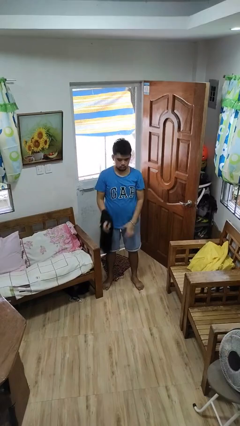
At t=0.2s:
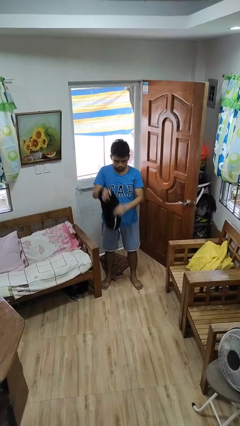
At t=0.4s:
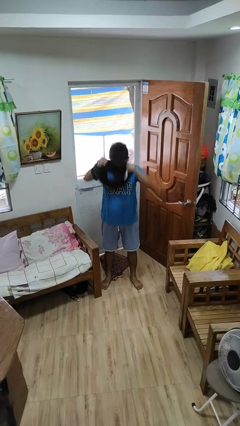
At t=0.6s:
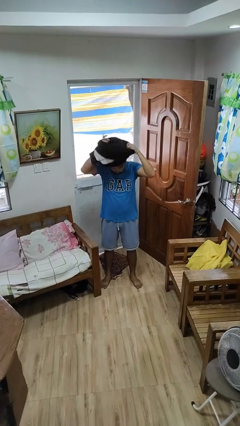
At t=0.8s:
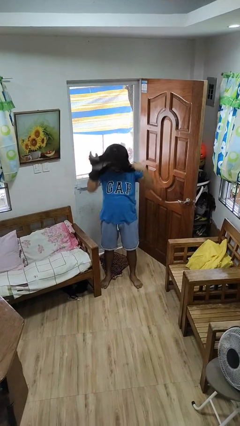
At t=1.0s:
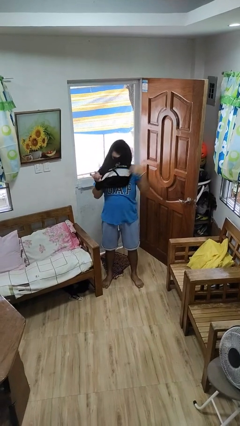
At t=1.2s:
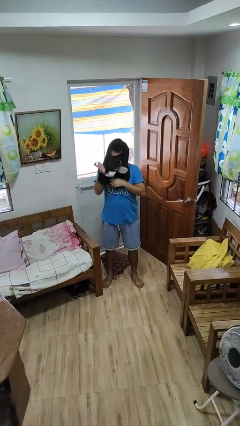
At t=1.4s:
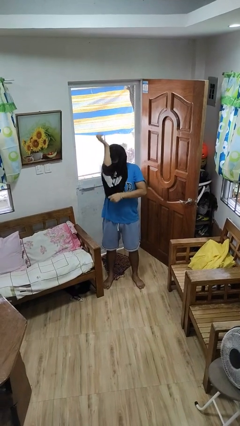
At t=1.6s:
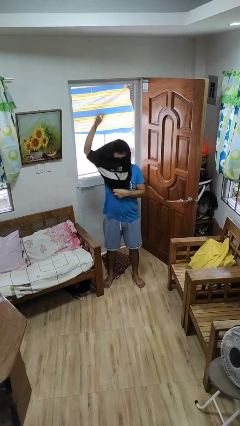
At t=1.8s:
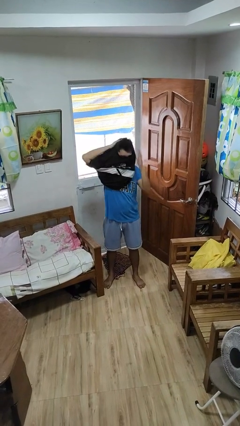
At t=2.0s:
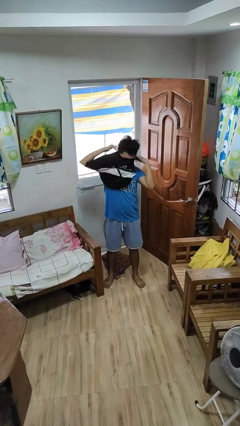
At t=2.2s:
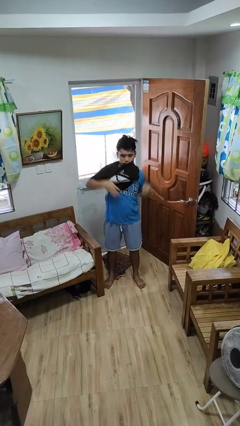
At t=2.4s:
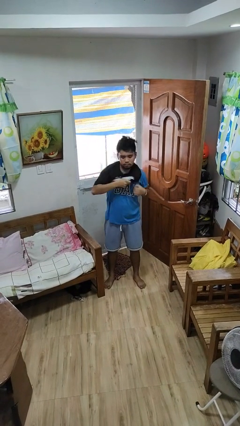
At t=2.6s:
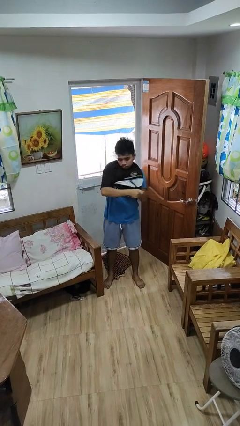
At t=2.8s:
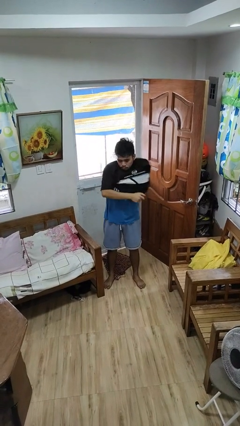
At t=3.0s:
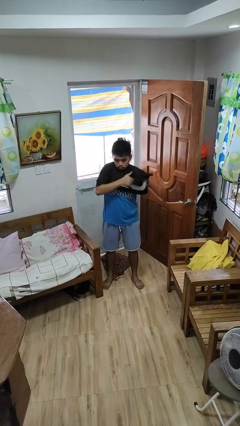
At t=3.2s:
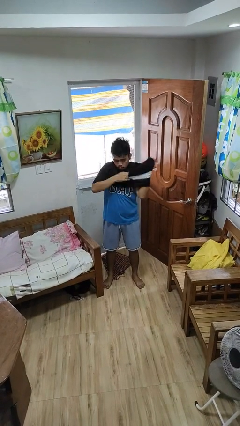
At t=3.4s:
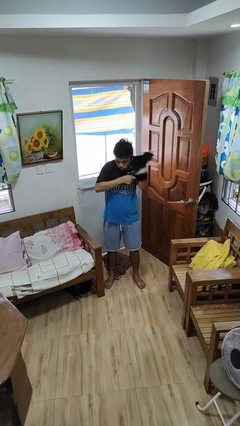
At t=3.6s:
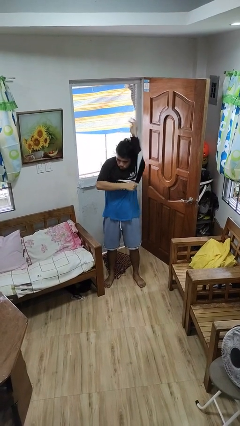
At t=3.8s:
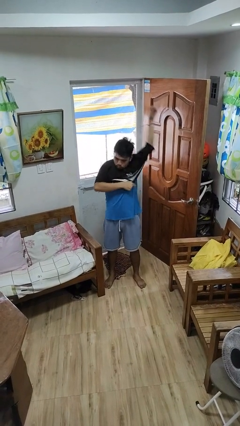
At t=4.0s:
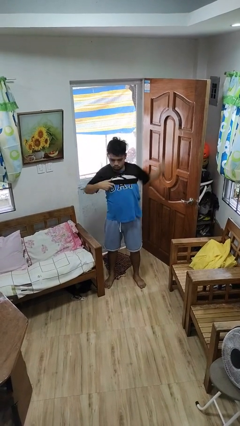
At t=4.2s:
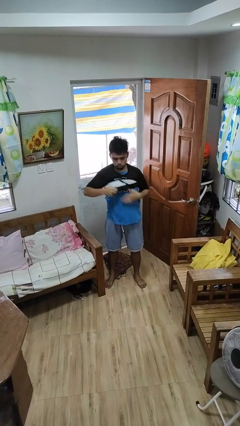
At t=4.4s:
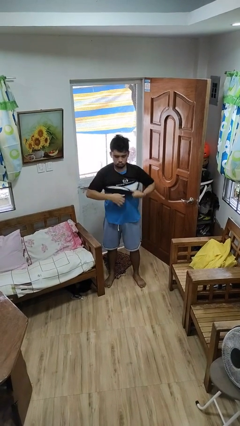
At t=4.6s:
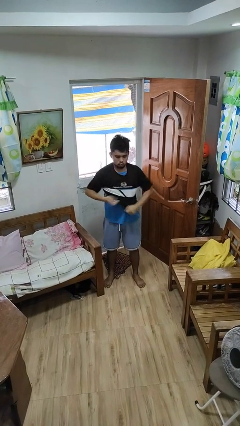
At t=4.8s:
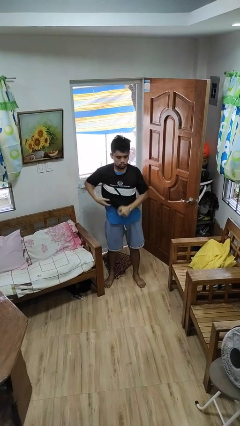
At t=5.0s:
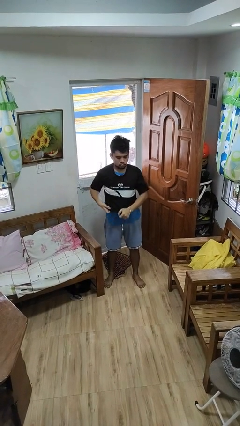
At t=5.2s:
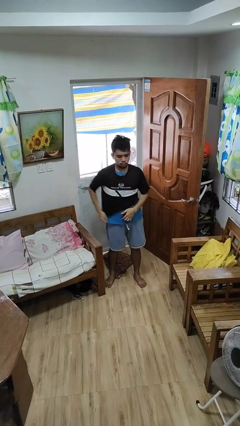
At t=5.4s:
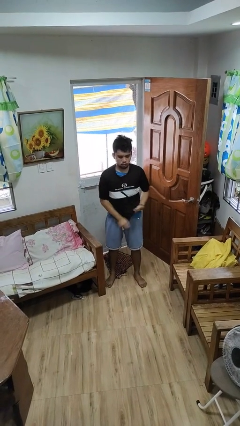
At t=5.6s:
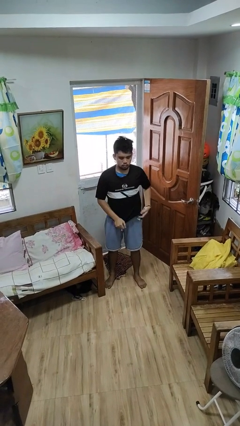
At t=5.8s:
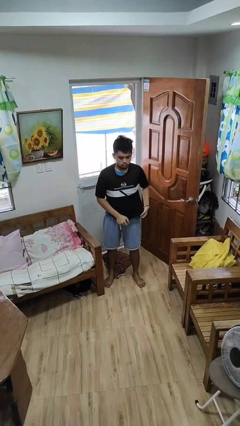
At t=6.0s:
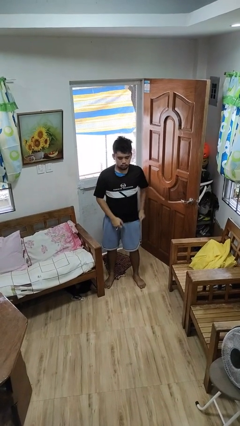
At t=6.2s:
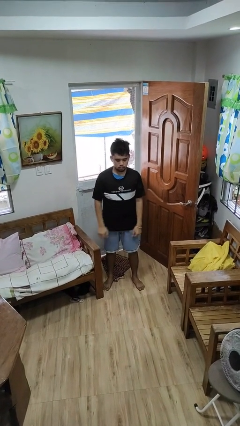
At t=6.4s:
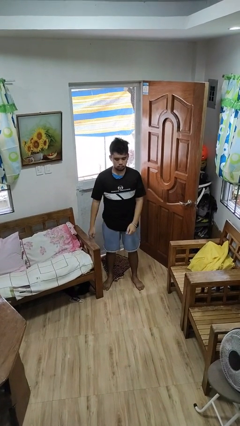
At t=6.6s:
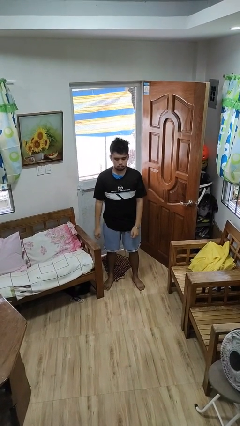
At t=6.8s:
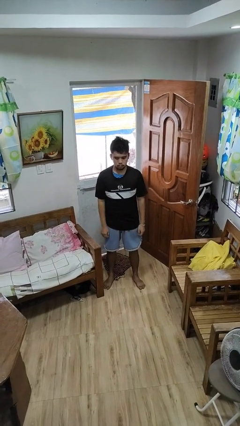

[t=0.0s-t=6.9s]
person puts on shirt

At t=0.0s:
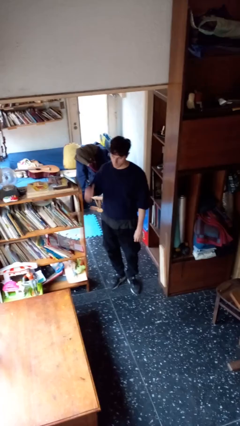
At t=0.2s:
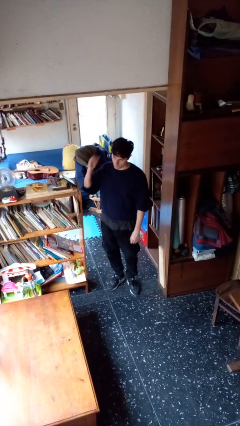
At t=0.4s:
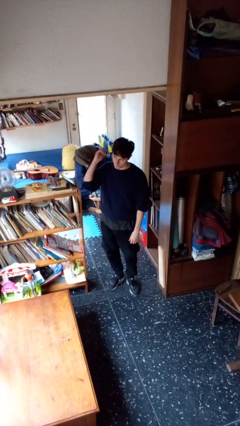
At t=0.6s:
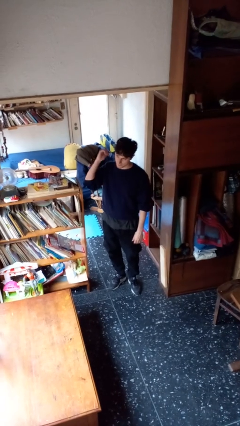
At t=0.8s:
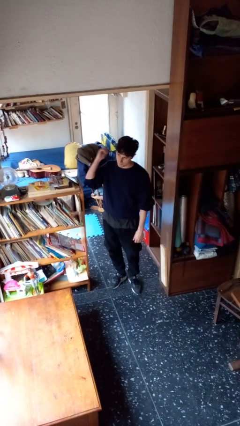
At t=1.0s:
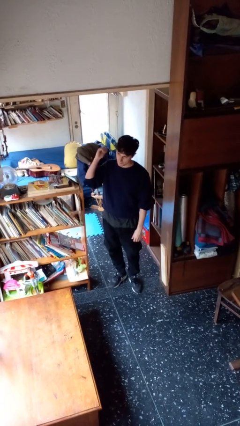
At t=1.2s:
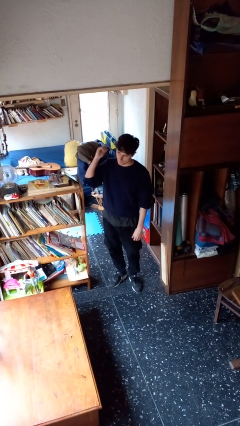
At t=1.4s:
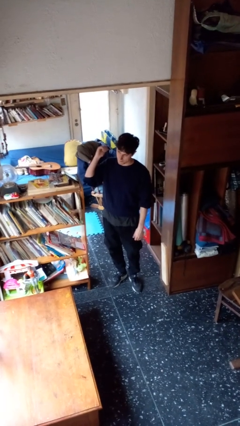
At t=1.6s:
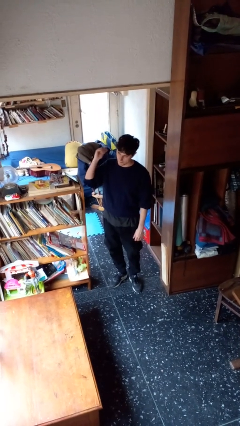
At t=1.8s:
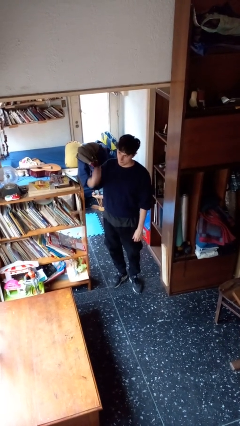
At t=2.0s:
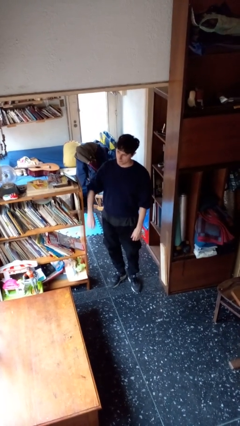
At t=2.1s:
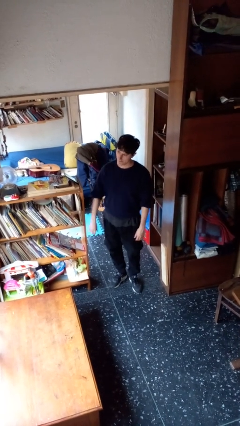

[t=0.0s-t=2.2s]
person gestures behind me

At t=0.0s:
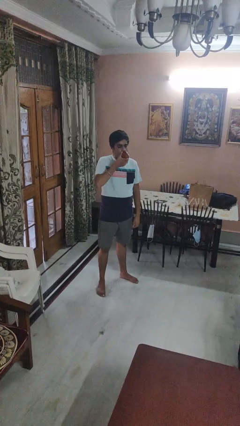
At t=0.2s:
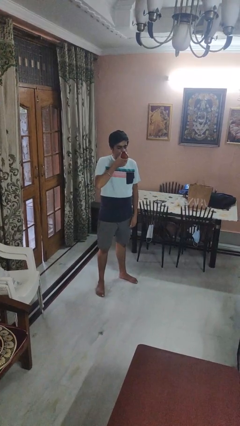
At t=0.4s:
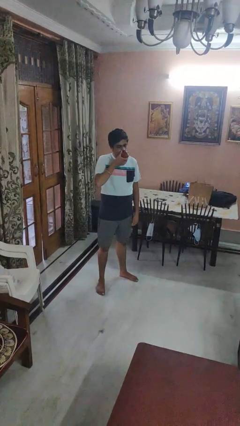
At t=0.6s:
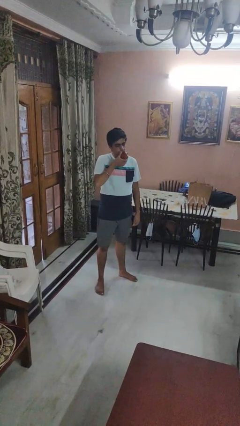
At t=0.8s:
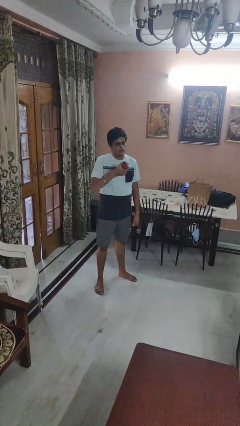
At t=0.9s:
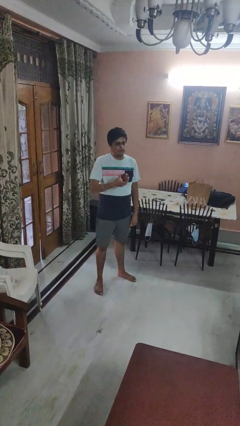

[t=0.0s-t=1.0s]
person eats apple

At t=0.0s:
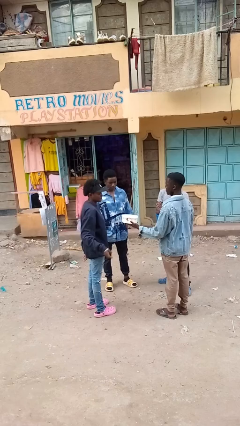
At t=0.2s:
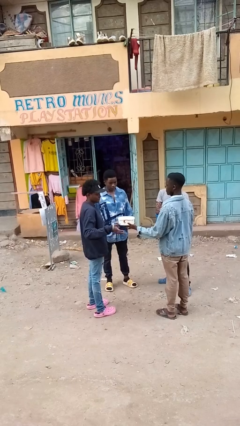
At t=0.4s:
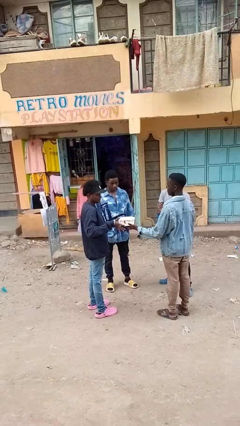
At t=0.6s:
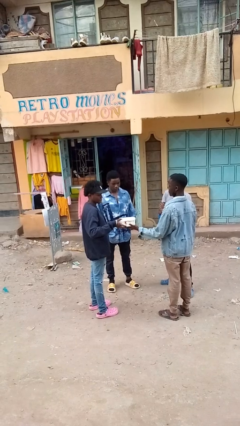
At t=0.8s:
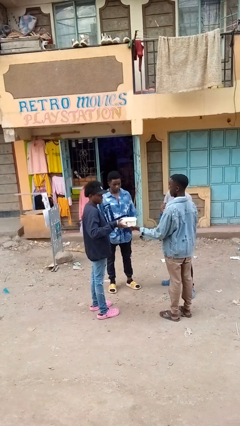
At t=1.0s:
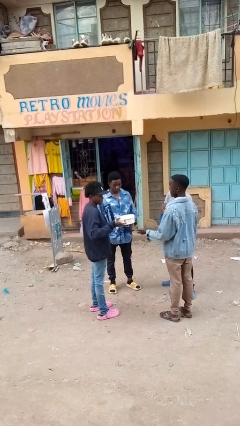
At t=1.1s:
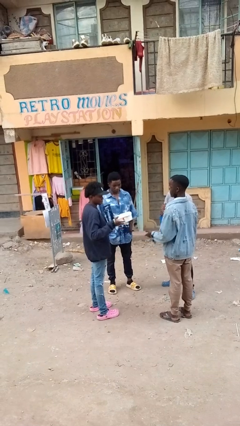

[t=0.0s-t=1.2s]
person transfers object to person

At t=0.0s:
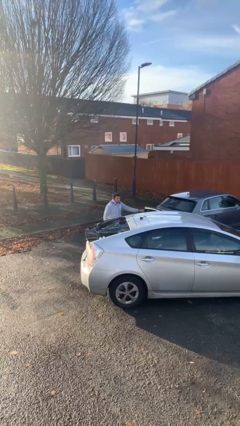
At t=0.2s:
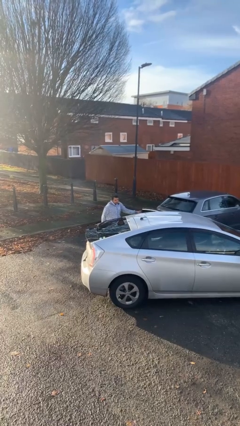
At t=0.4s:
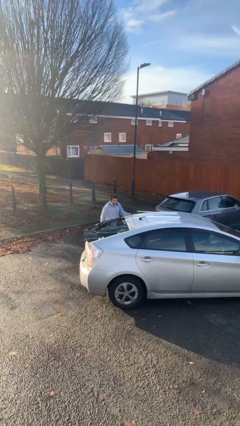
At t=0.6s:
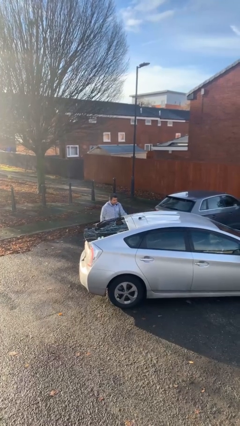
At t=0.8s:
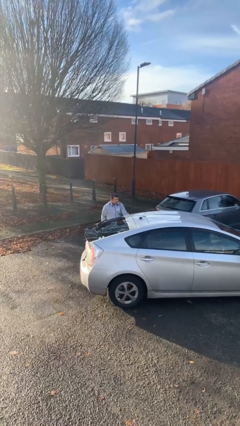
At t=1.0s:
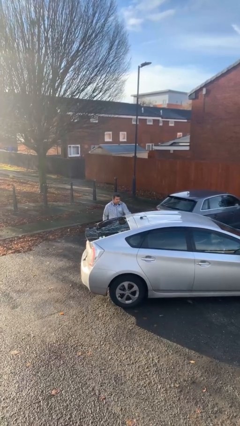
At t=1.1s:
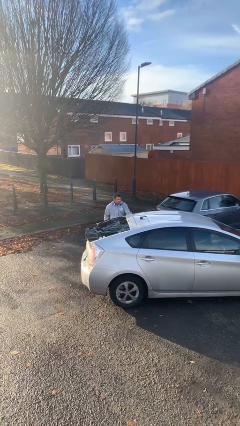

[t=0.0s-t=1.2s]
person closes car door

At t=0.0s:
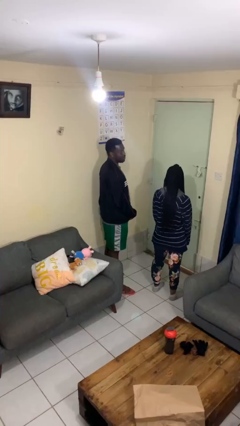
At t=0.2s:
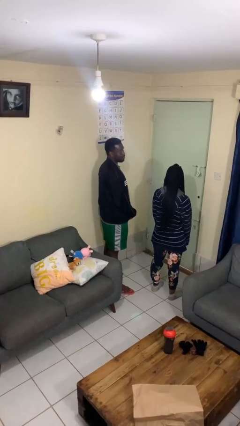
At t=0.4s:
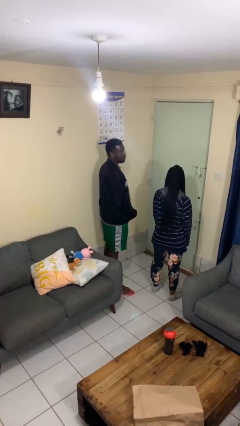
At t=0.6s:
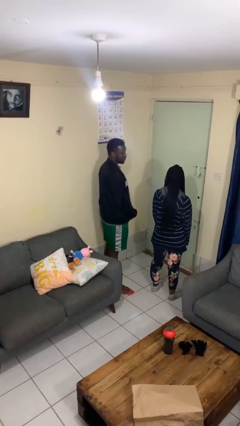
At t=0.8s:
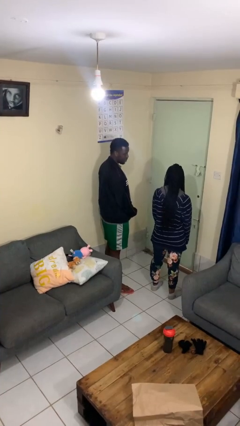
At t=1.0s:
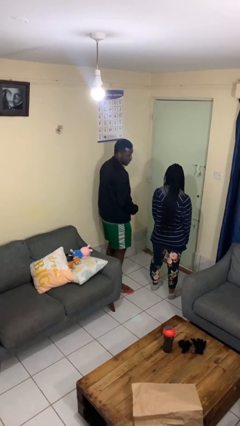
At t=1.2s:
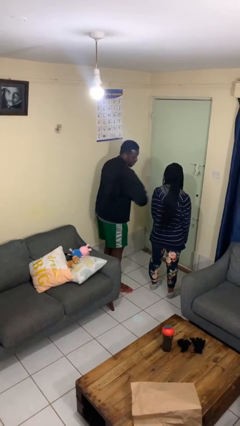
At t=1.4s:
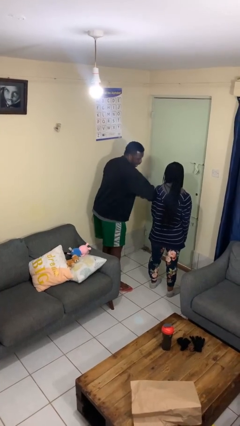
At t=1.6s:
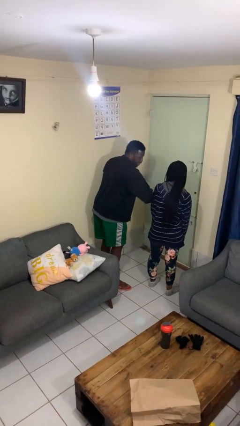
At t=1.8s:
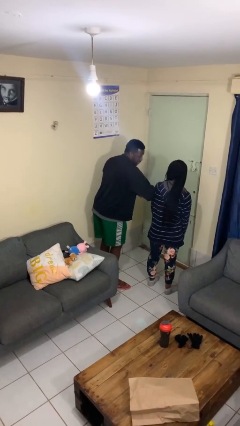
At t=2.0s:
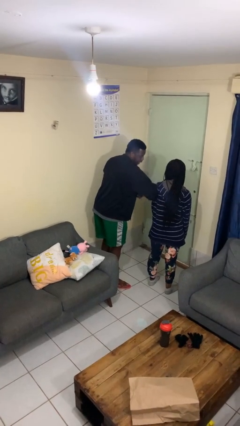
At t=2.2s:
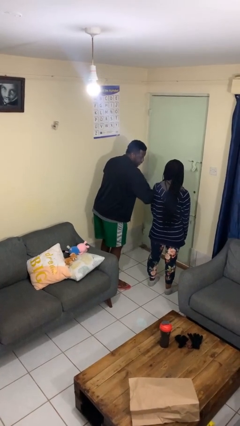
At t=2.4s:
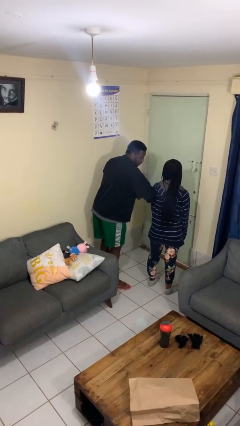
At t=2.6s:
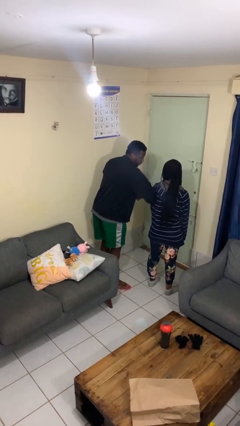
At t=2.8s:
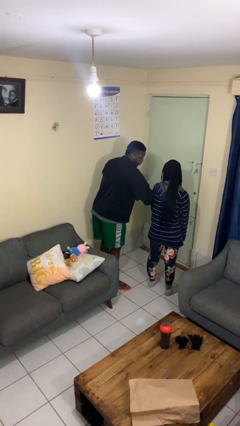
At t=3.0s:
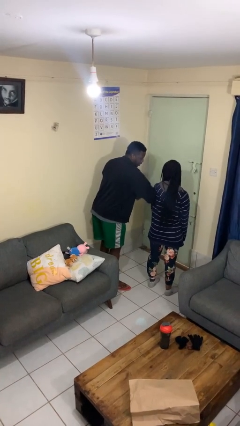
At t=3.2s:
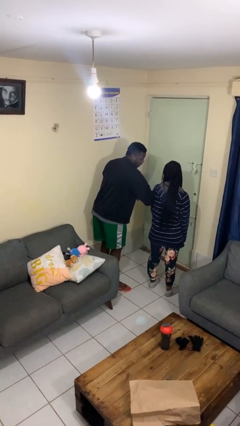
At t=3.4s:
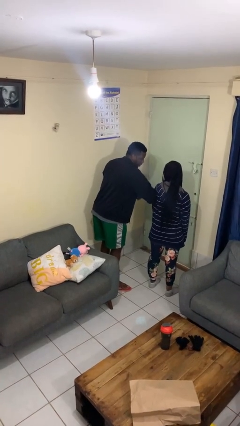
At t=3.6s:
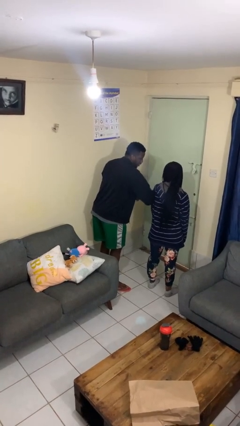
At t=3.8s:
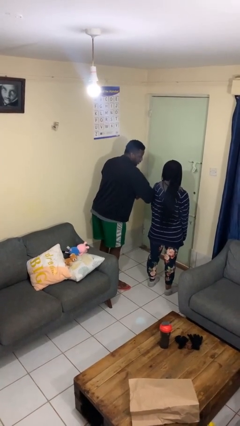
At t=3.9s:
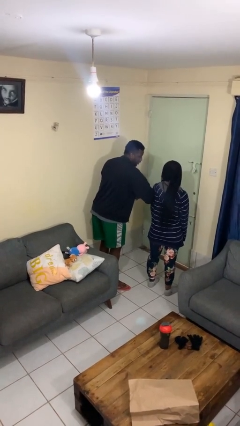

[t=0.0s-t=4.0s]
person nudges person with elbow

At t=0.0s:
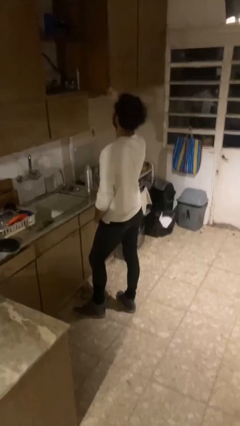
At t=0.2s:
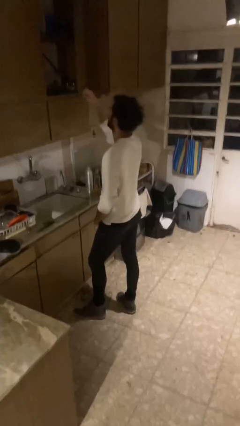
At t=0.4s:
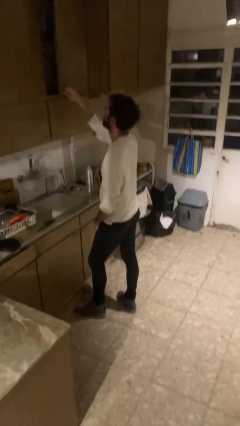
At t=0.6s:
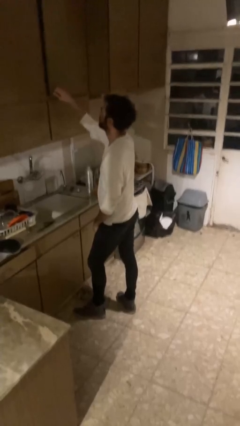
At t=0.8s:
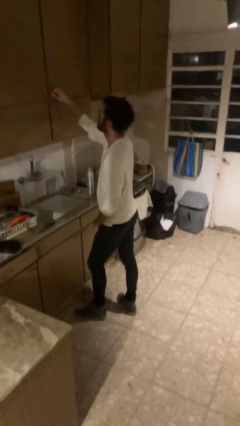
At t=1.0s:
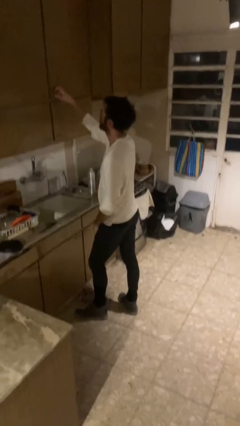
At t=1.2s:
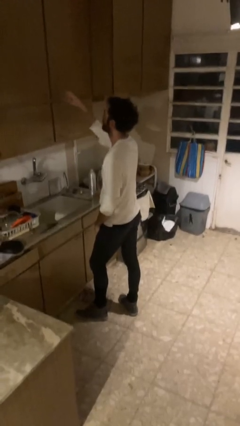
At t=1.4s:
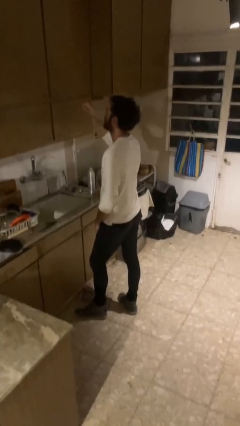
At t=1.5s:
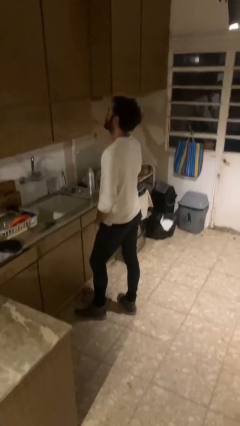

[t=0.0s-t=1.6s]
person closes cabinet
